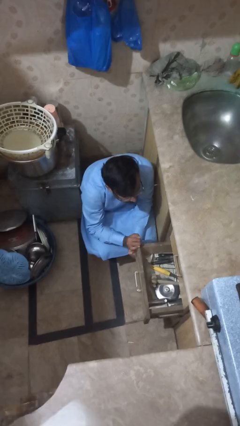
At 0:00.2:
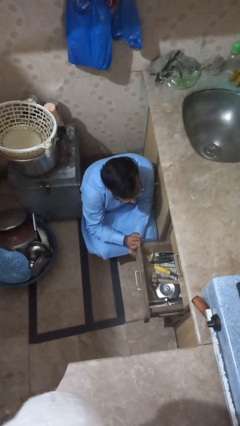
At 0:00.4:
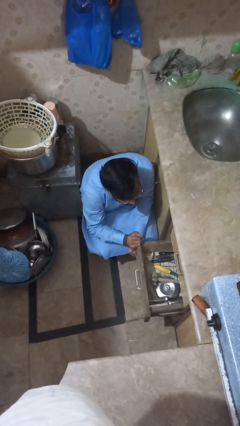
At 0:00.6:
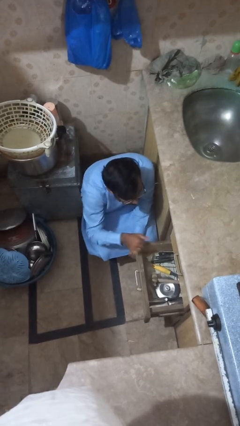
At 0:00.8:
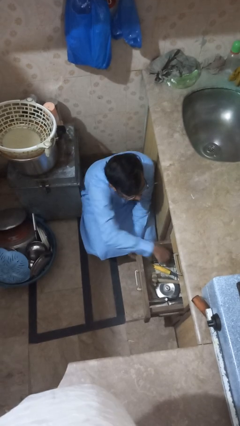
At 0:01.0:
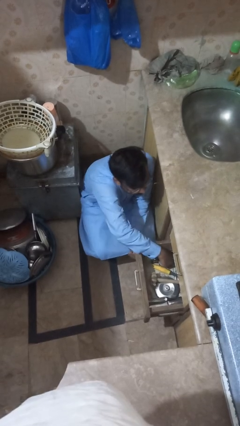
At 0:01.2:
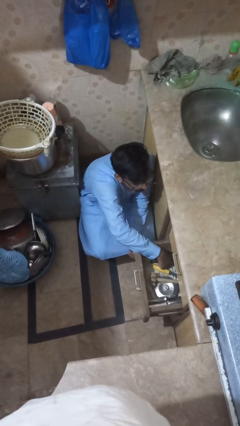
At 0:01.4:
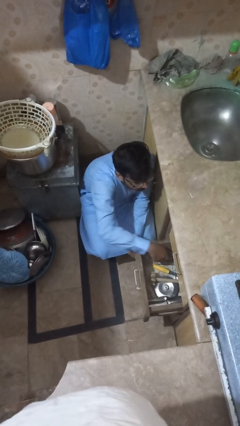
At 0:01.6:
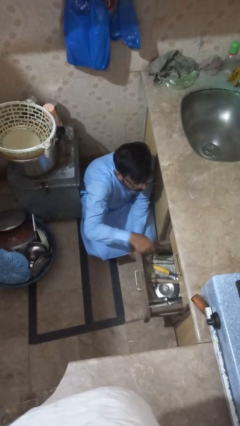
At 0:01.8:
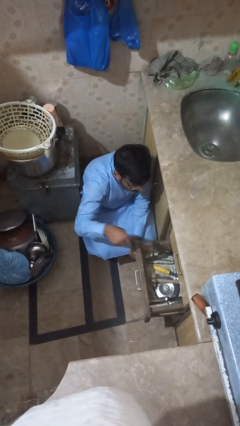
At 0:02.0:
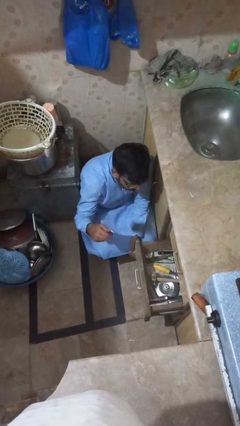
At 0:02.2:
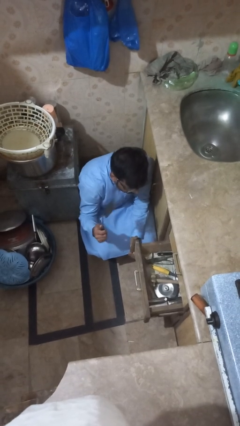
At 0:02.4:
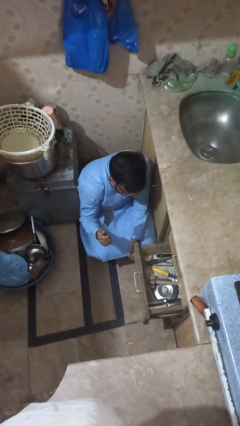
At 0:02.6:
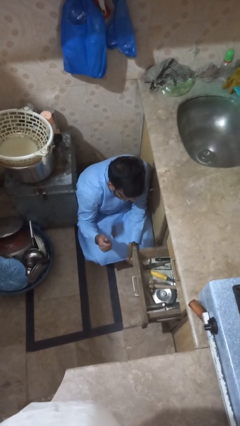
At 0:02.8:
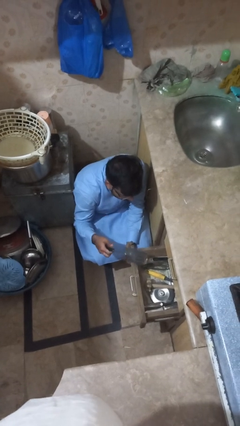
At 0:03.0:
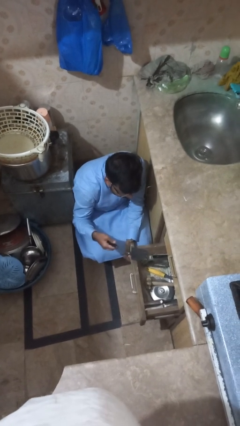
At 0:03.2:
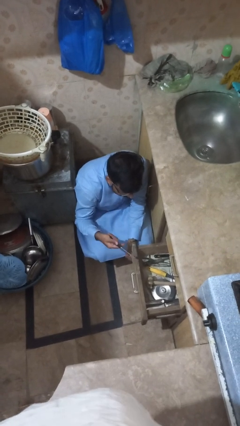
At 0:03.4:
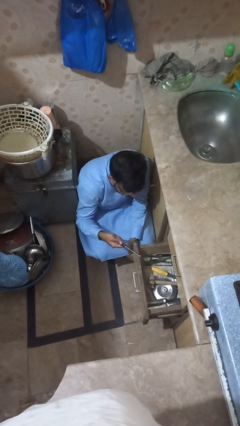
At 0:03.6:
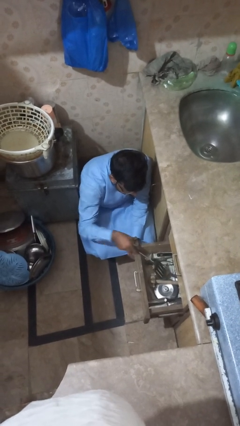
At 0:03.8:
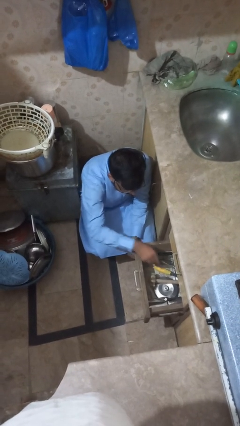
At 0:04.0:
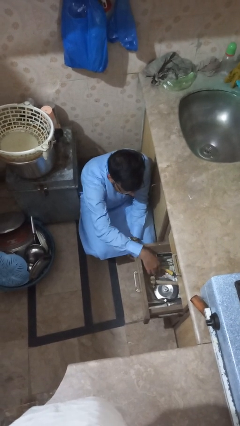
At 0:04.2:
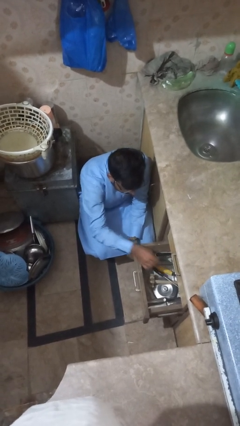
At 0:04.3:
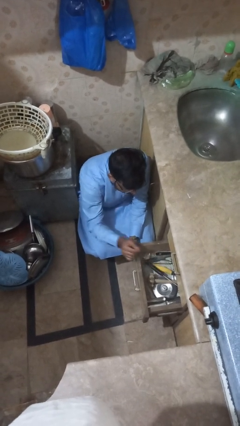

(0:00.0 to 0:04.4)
person searches in kitchen drawer

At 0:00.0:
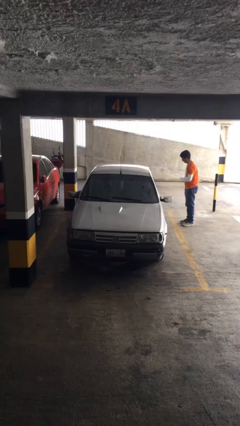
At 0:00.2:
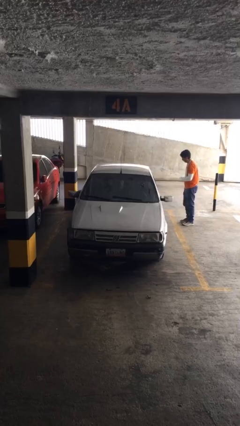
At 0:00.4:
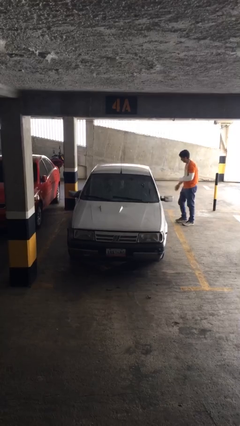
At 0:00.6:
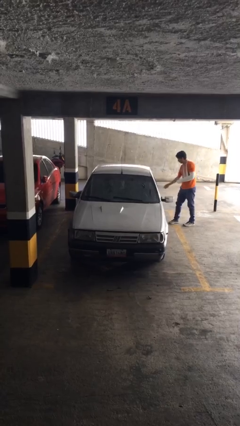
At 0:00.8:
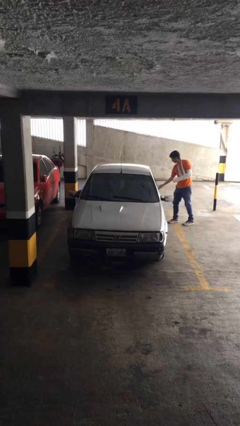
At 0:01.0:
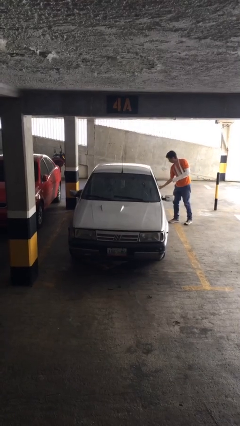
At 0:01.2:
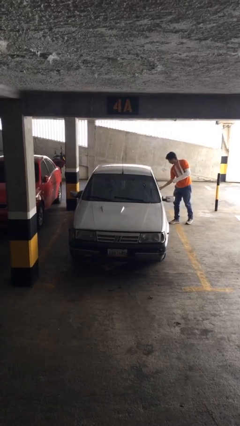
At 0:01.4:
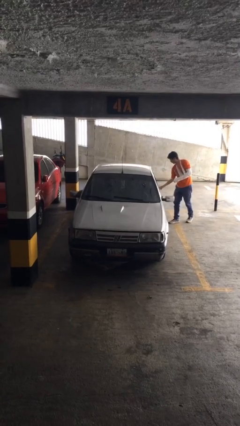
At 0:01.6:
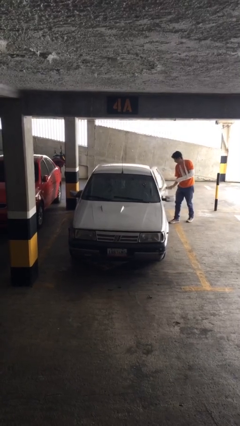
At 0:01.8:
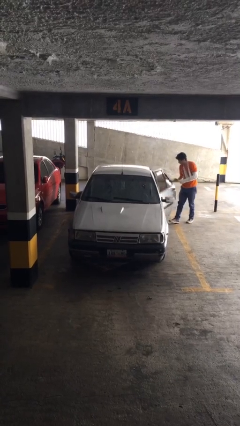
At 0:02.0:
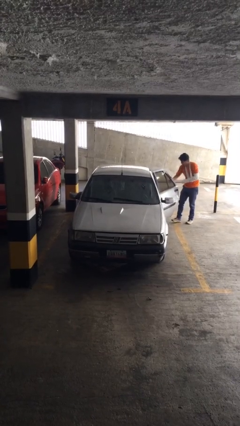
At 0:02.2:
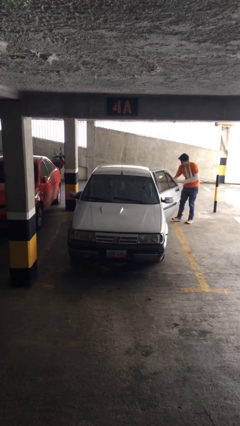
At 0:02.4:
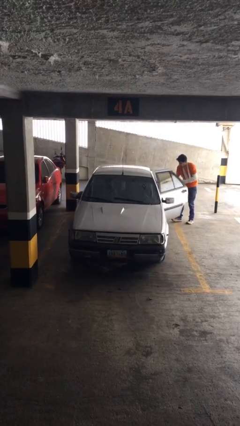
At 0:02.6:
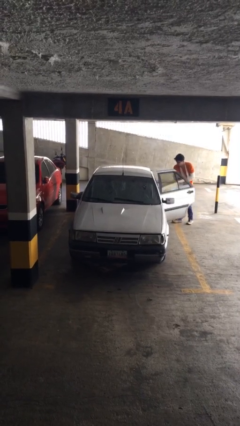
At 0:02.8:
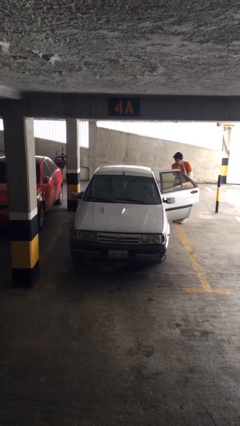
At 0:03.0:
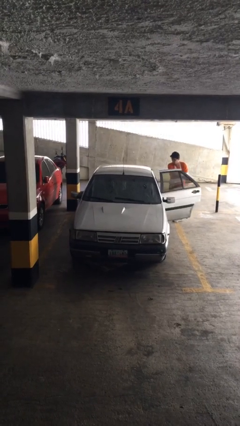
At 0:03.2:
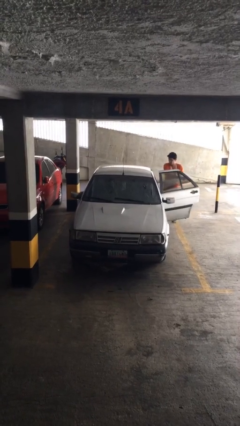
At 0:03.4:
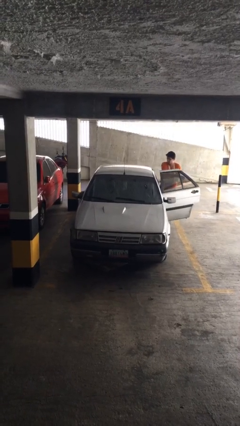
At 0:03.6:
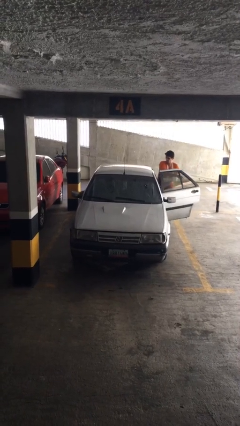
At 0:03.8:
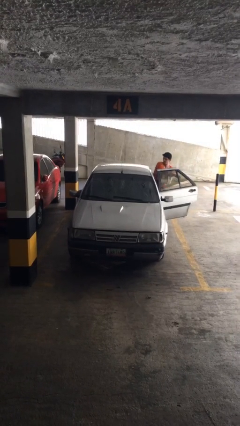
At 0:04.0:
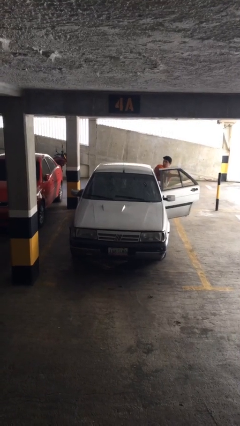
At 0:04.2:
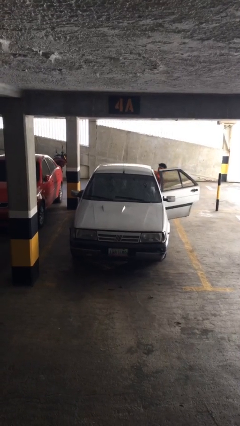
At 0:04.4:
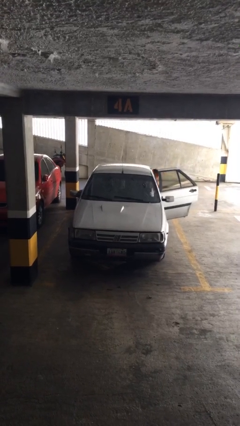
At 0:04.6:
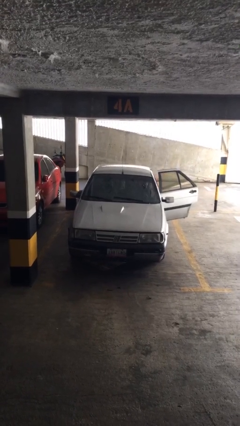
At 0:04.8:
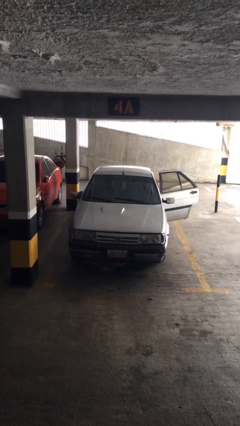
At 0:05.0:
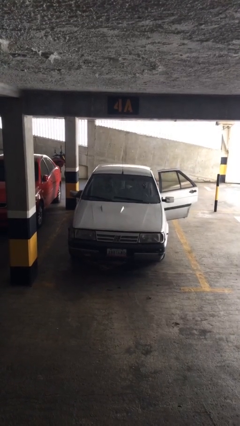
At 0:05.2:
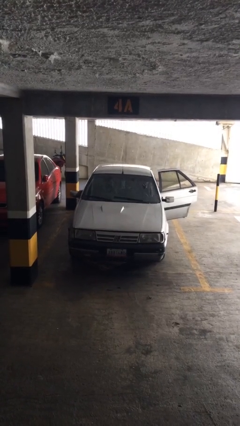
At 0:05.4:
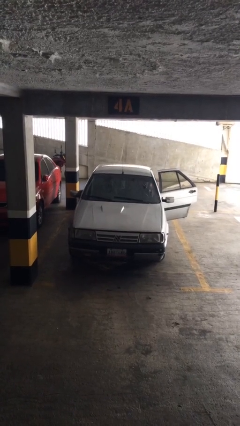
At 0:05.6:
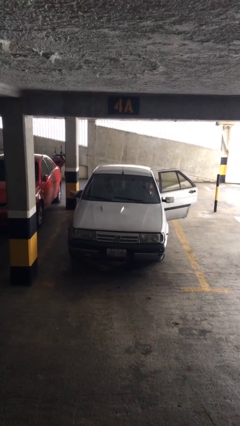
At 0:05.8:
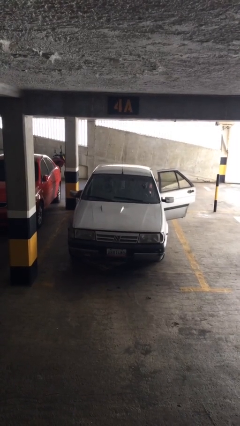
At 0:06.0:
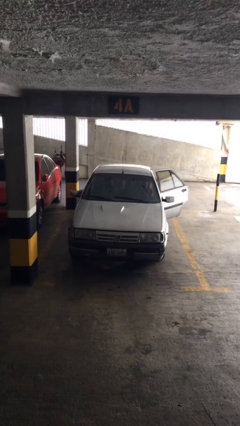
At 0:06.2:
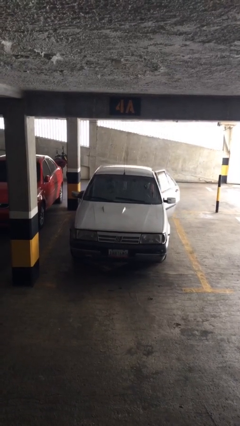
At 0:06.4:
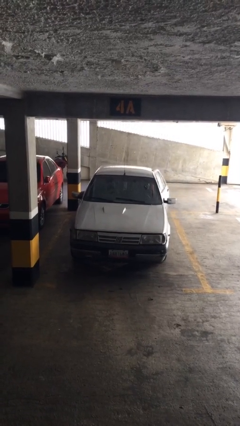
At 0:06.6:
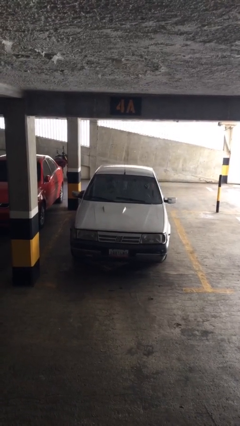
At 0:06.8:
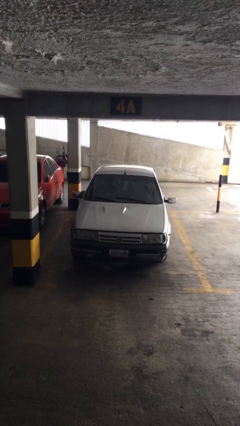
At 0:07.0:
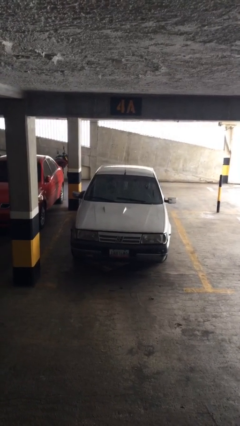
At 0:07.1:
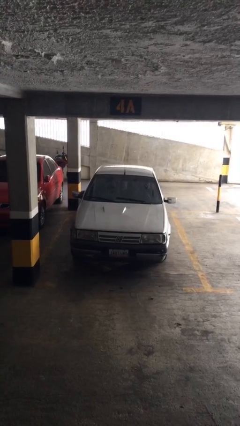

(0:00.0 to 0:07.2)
car picks up person

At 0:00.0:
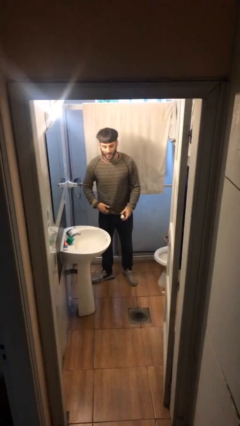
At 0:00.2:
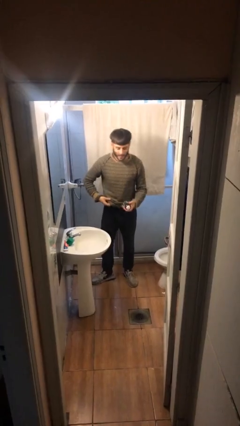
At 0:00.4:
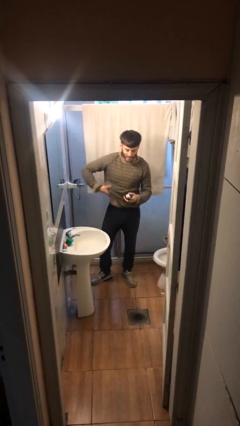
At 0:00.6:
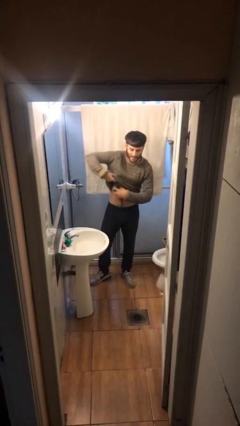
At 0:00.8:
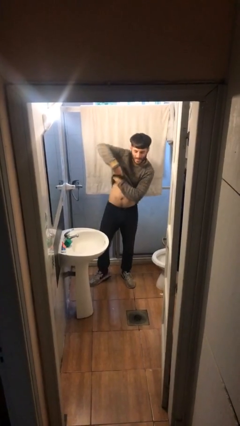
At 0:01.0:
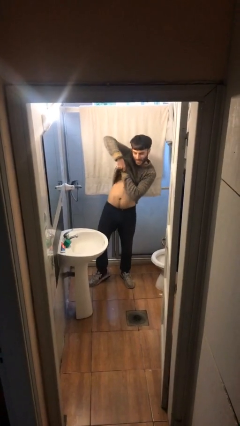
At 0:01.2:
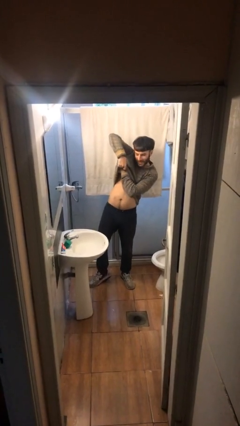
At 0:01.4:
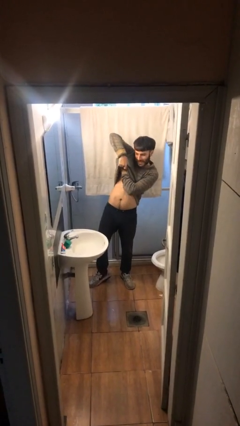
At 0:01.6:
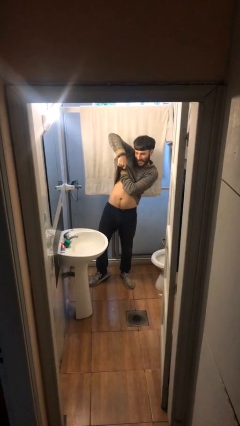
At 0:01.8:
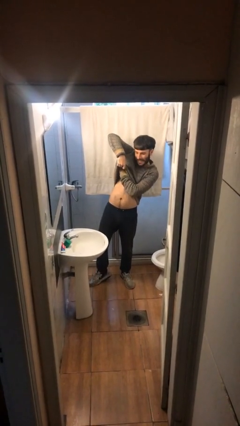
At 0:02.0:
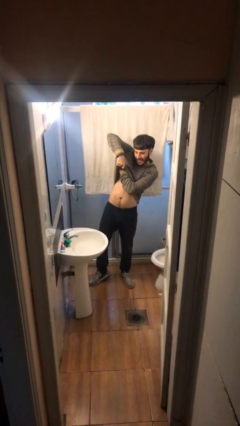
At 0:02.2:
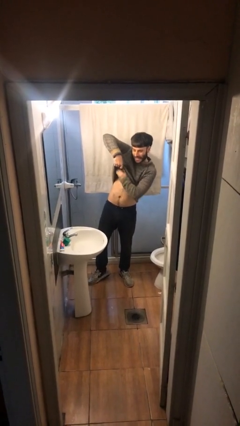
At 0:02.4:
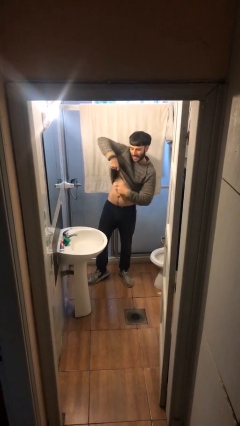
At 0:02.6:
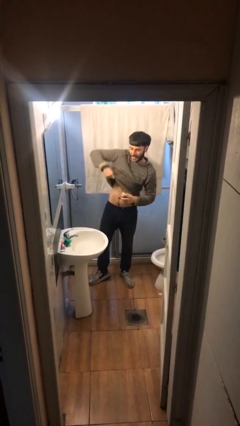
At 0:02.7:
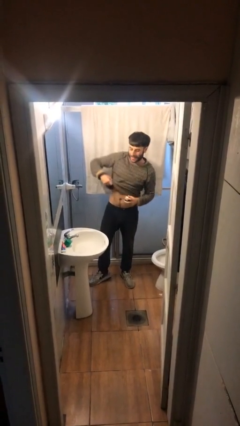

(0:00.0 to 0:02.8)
person applies deodorant

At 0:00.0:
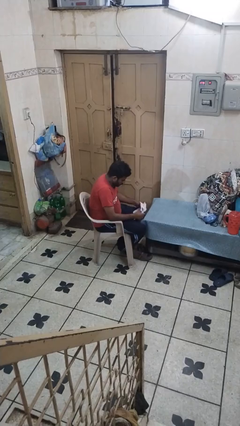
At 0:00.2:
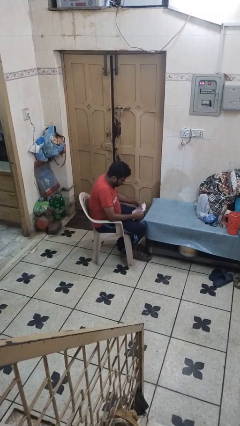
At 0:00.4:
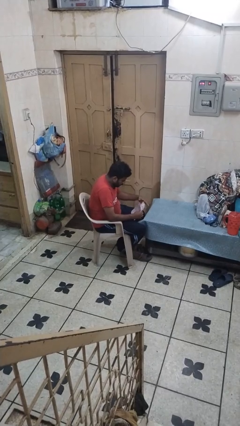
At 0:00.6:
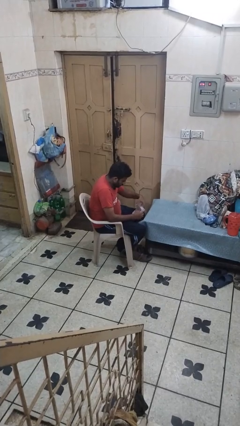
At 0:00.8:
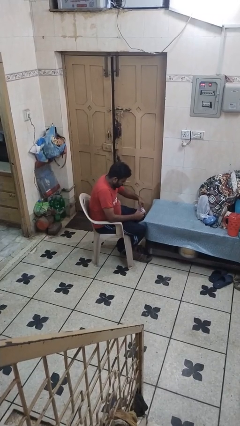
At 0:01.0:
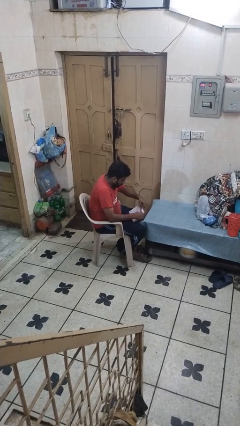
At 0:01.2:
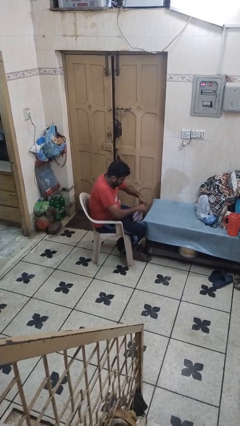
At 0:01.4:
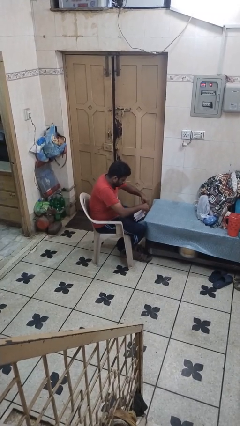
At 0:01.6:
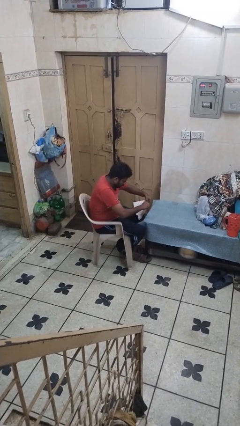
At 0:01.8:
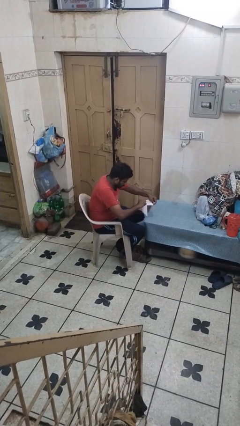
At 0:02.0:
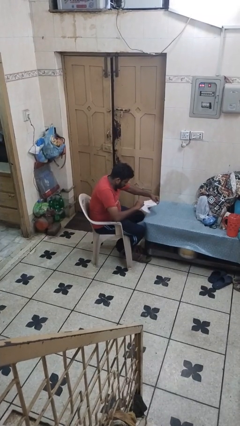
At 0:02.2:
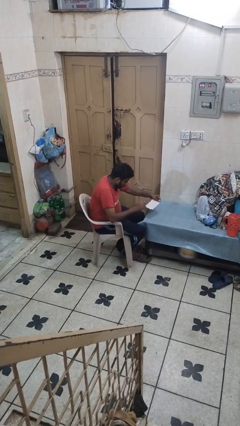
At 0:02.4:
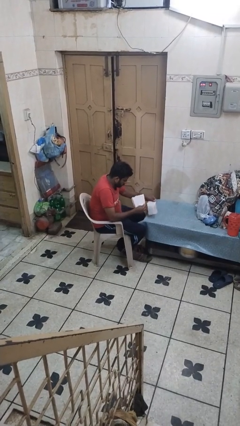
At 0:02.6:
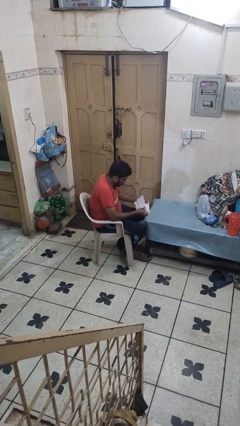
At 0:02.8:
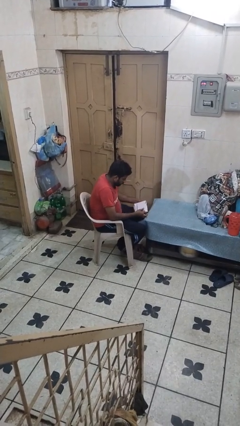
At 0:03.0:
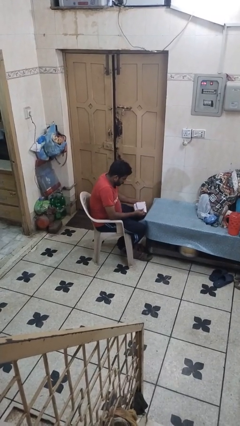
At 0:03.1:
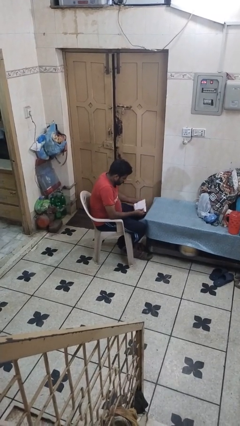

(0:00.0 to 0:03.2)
person tears paper
